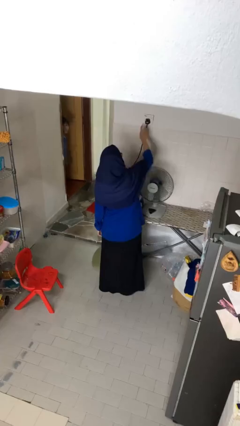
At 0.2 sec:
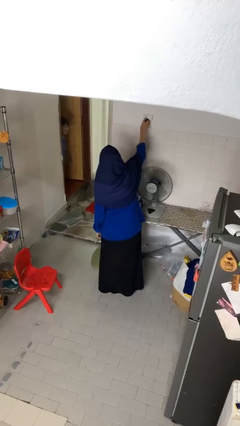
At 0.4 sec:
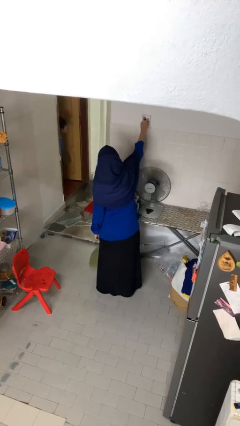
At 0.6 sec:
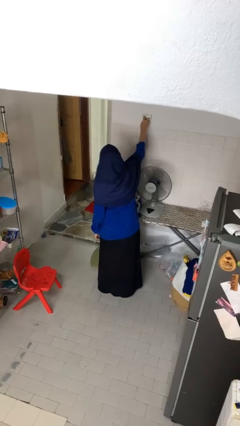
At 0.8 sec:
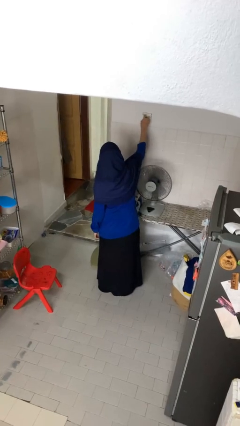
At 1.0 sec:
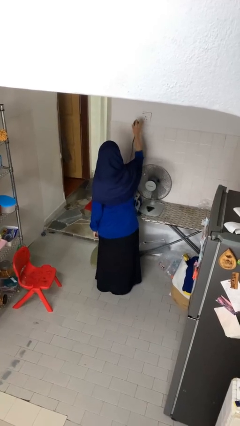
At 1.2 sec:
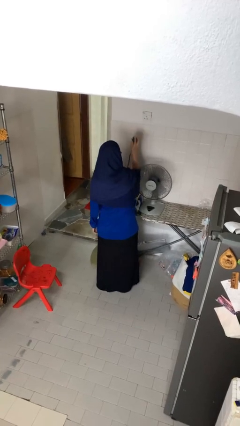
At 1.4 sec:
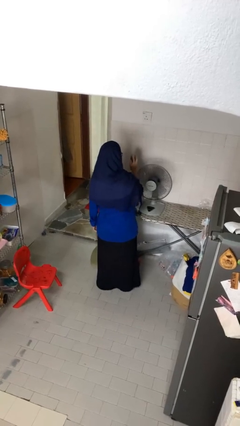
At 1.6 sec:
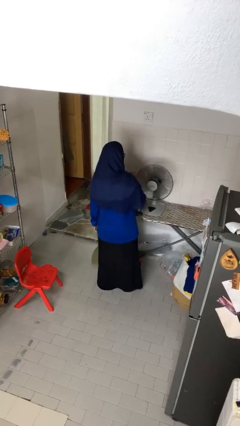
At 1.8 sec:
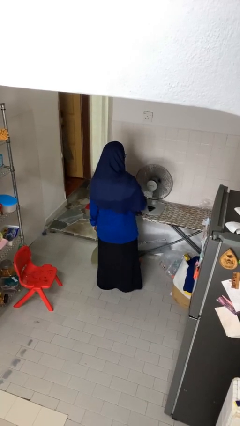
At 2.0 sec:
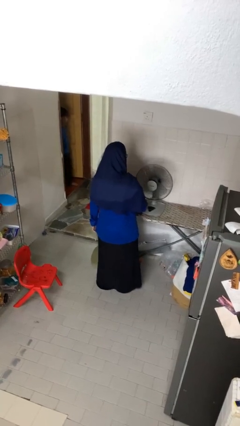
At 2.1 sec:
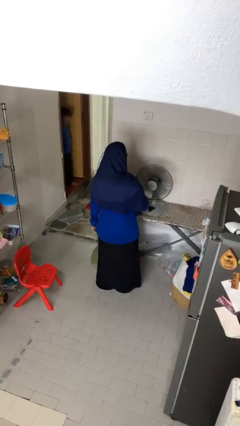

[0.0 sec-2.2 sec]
person unplugs from electrical socket

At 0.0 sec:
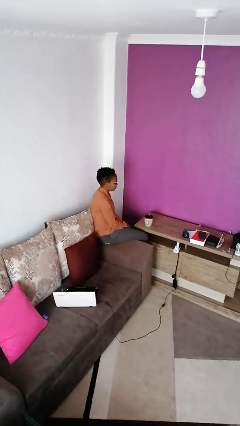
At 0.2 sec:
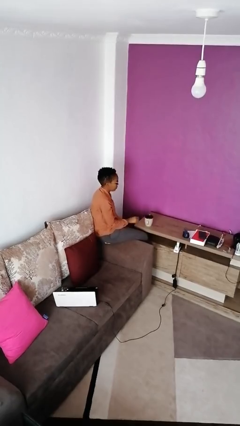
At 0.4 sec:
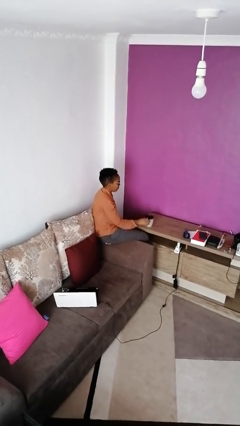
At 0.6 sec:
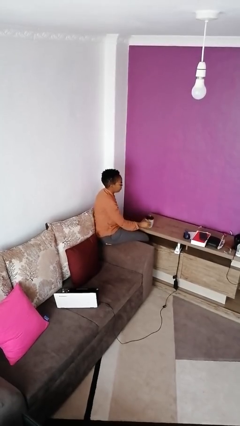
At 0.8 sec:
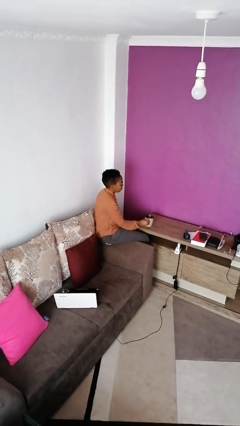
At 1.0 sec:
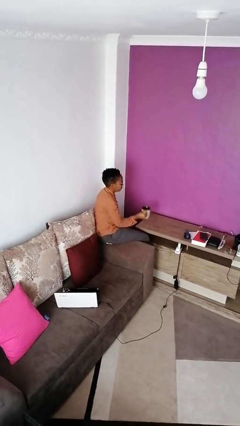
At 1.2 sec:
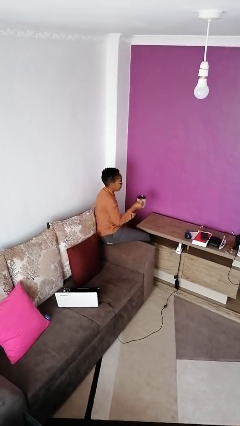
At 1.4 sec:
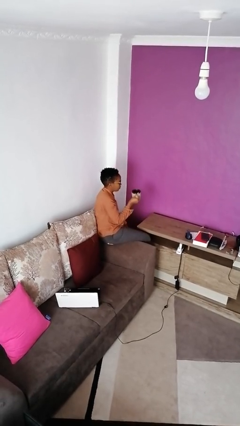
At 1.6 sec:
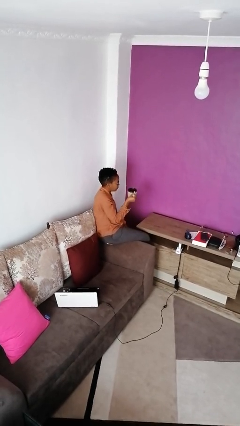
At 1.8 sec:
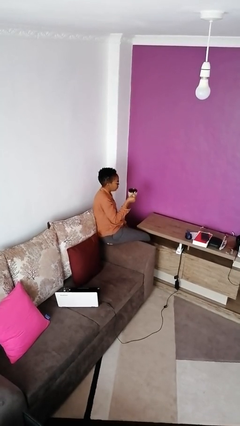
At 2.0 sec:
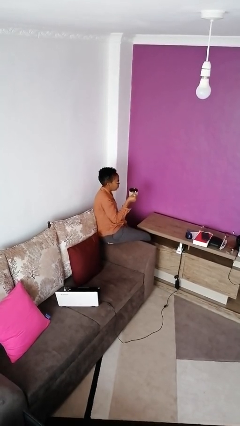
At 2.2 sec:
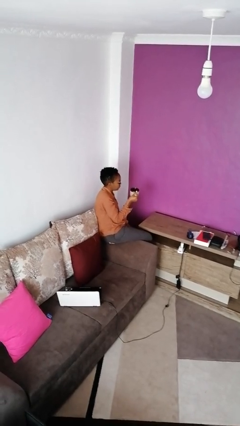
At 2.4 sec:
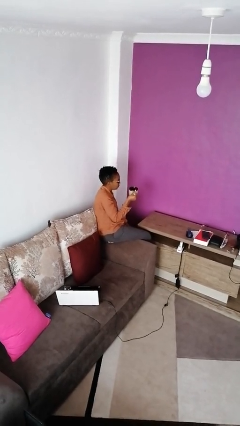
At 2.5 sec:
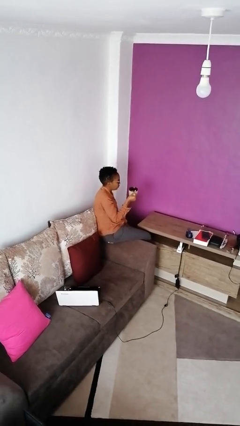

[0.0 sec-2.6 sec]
person picks up object from table

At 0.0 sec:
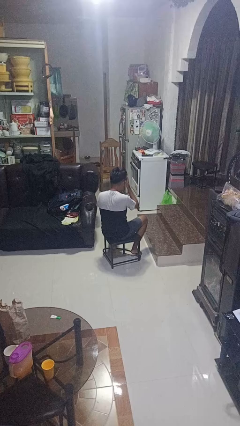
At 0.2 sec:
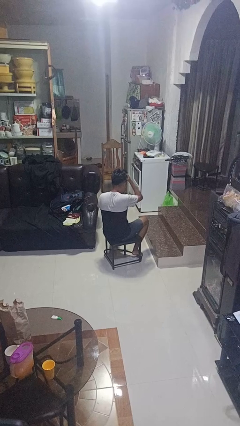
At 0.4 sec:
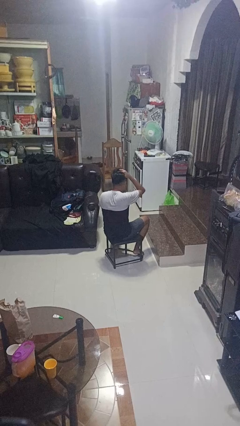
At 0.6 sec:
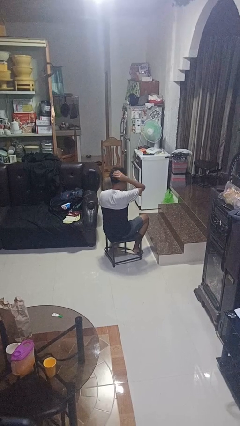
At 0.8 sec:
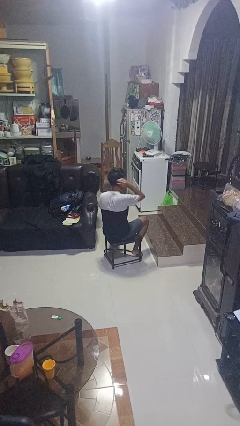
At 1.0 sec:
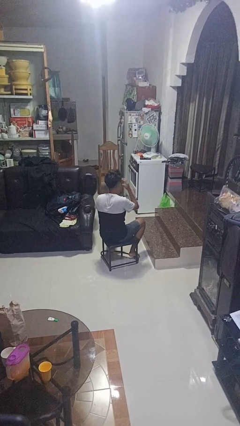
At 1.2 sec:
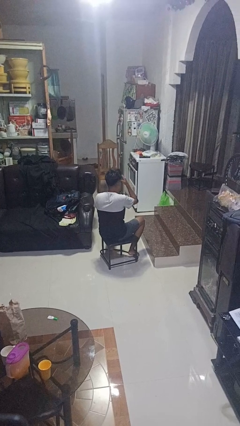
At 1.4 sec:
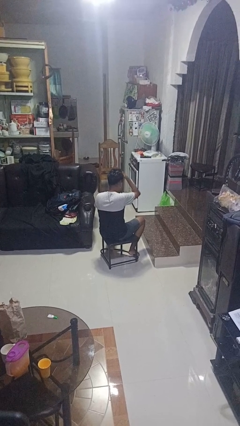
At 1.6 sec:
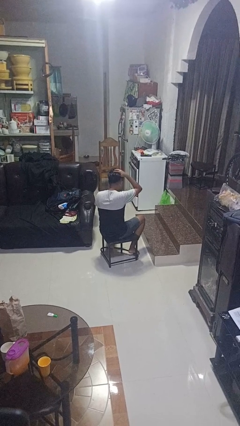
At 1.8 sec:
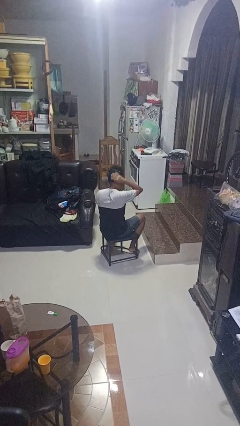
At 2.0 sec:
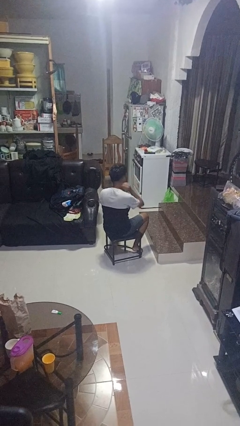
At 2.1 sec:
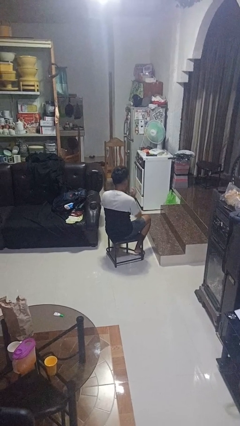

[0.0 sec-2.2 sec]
person strokes hair

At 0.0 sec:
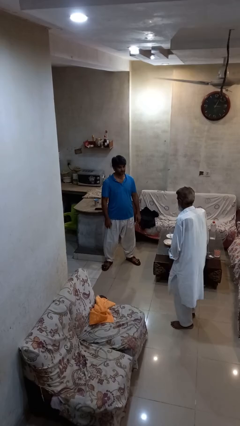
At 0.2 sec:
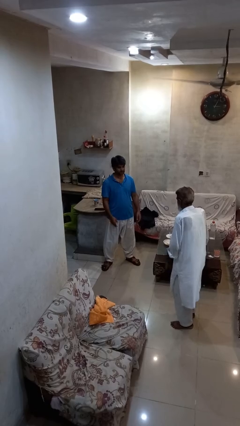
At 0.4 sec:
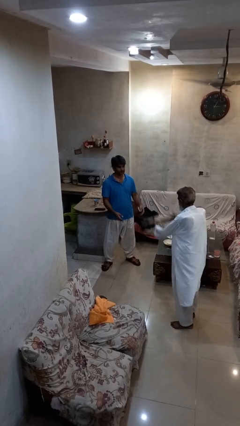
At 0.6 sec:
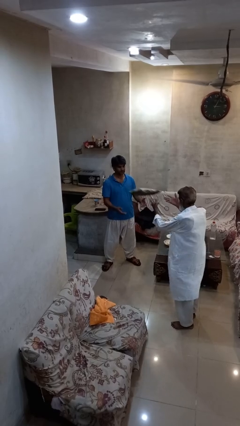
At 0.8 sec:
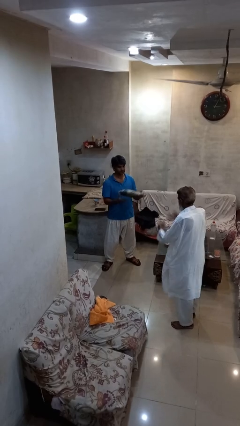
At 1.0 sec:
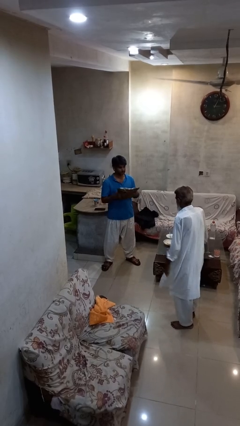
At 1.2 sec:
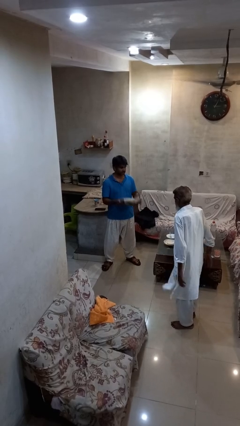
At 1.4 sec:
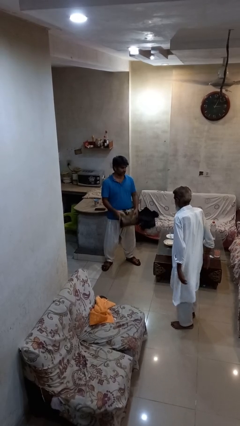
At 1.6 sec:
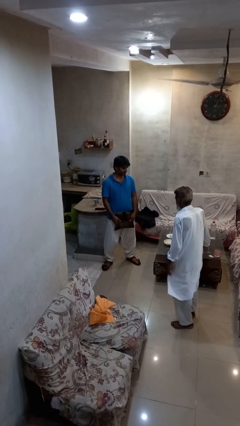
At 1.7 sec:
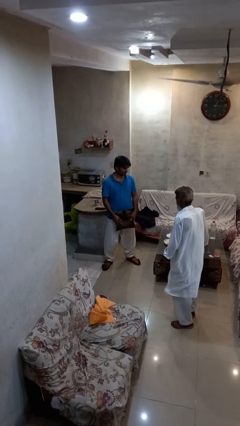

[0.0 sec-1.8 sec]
person catches object from person

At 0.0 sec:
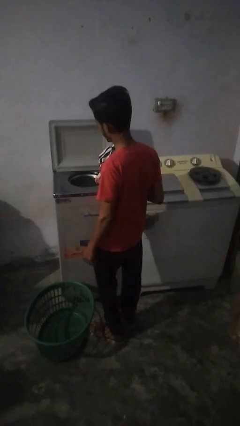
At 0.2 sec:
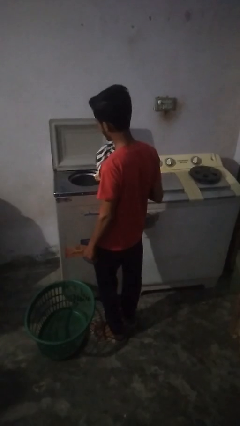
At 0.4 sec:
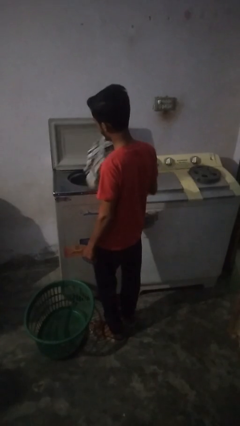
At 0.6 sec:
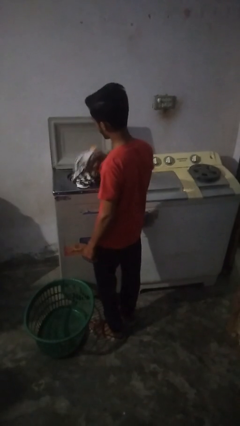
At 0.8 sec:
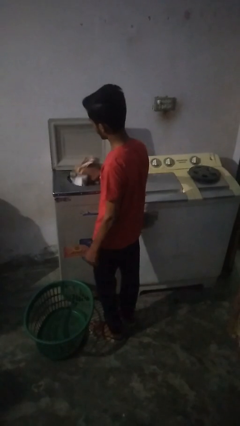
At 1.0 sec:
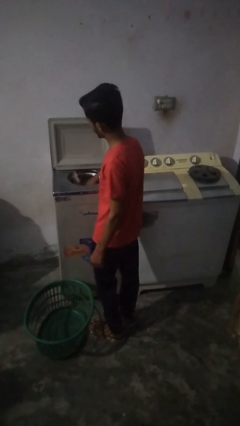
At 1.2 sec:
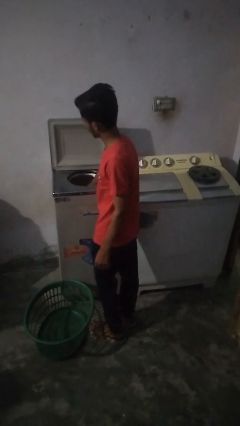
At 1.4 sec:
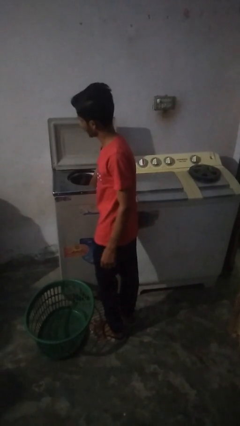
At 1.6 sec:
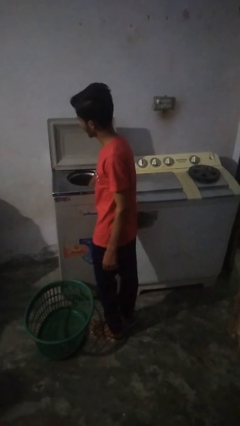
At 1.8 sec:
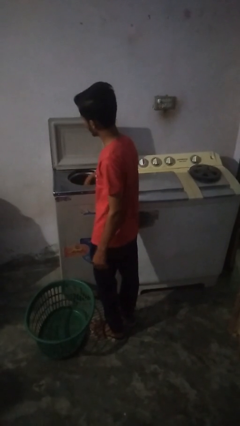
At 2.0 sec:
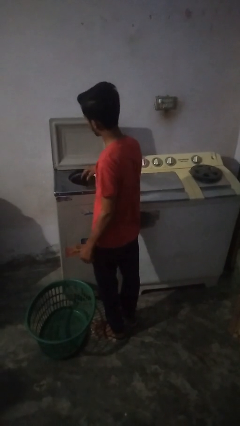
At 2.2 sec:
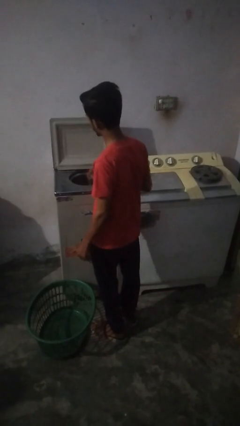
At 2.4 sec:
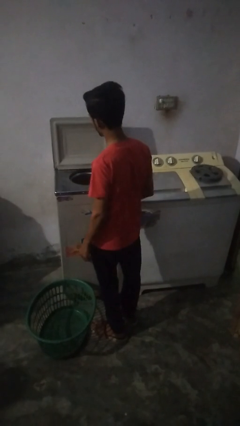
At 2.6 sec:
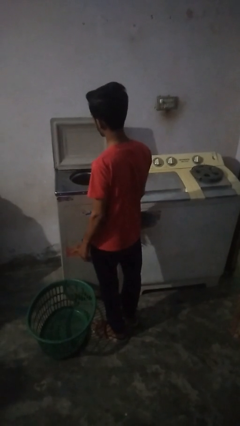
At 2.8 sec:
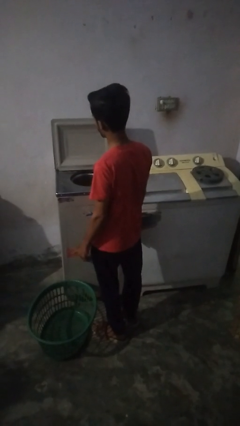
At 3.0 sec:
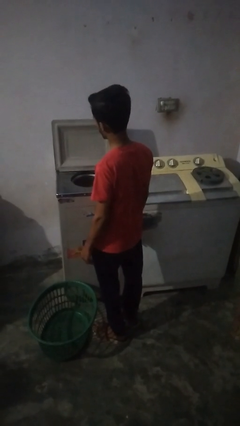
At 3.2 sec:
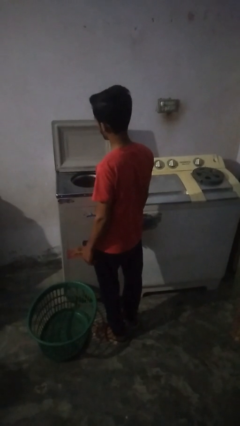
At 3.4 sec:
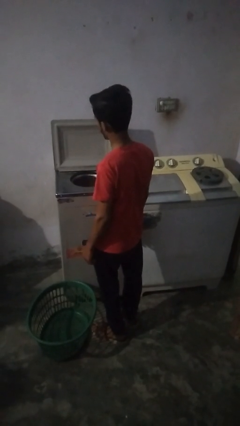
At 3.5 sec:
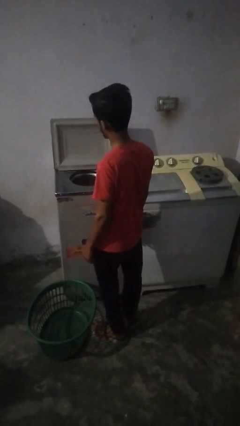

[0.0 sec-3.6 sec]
person loads dryer

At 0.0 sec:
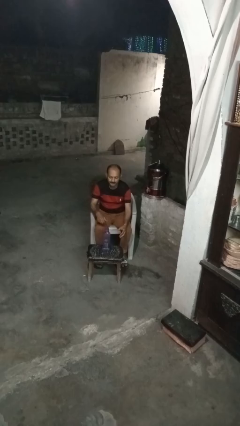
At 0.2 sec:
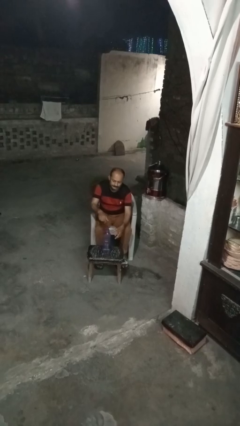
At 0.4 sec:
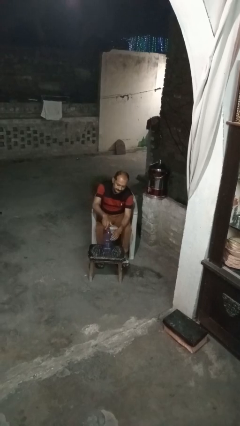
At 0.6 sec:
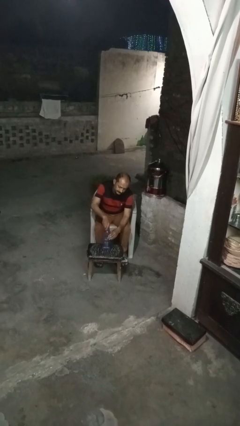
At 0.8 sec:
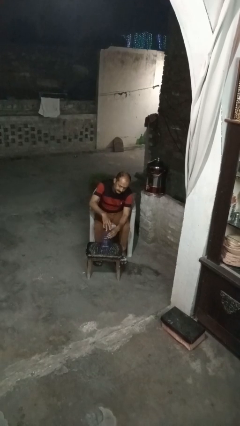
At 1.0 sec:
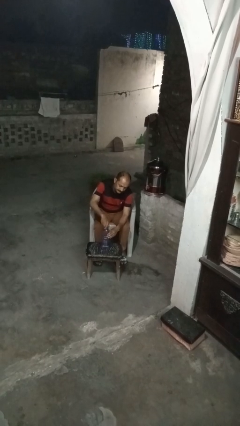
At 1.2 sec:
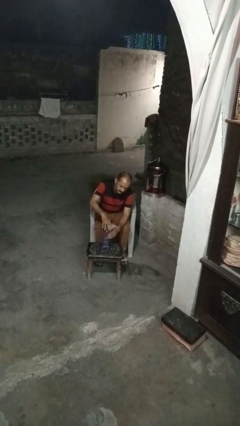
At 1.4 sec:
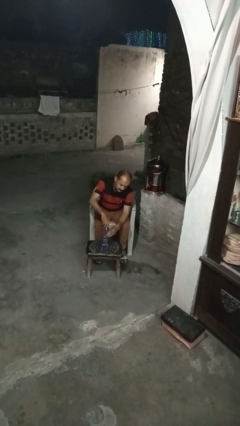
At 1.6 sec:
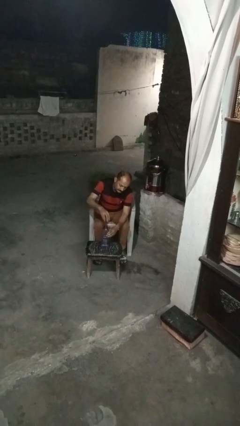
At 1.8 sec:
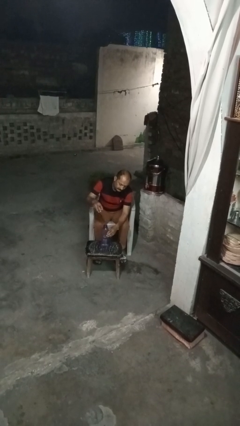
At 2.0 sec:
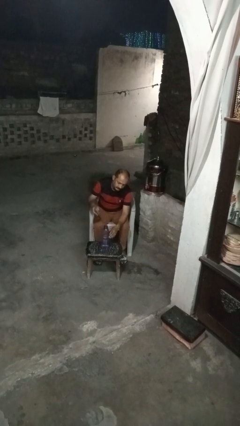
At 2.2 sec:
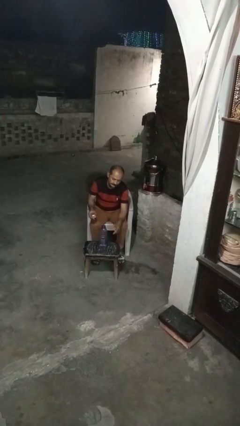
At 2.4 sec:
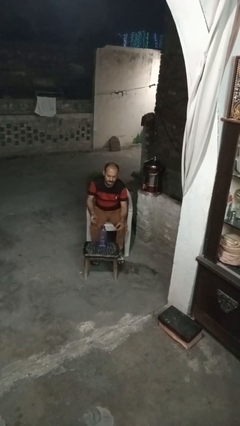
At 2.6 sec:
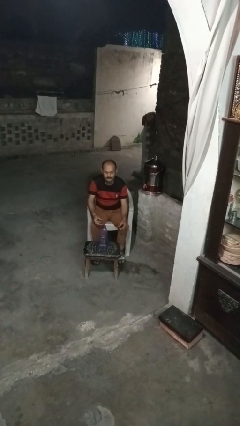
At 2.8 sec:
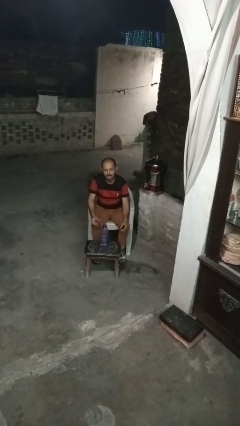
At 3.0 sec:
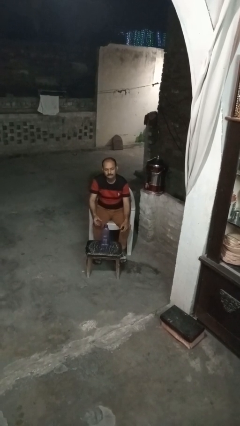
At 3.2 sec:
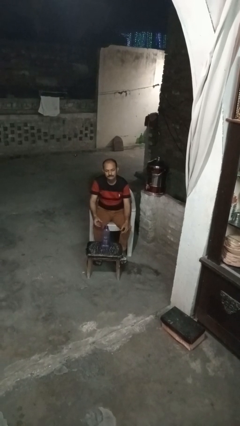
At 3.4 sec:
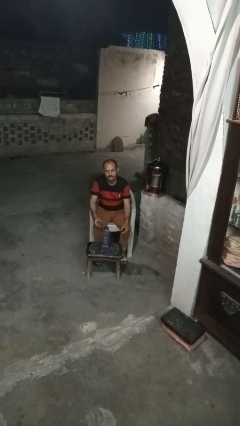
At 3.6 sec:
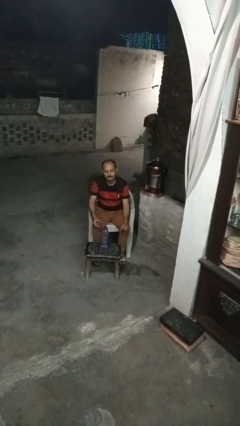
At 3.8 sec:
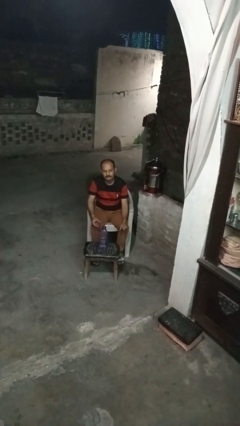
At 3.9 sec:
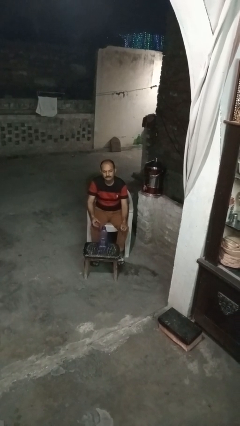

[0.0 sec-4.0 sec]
person unscrews lid from bottle

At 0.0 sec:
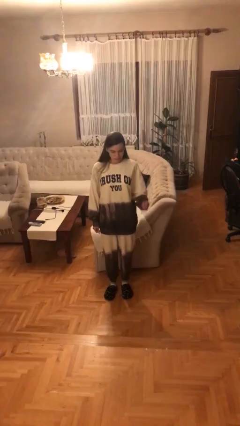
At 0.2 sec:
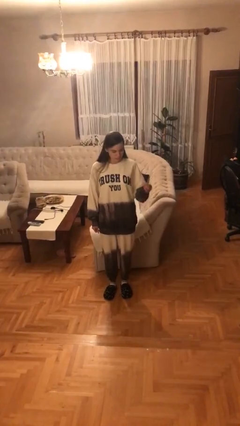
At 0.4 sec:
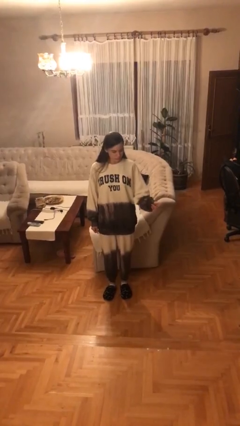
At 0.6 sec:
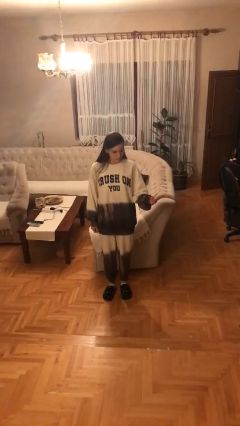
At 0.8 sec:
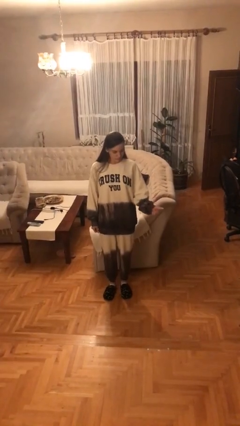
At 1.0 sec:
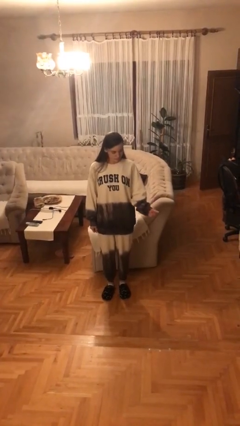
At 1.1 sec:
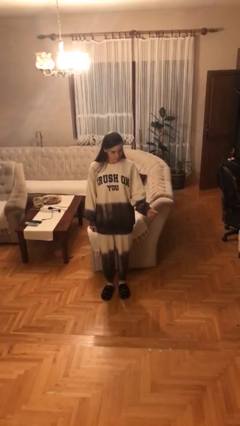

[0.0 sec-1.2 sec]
person snaps fingers
